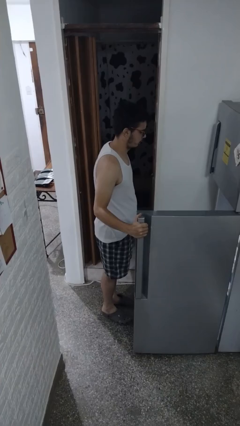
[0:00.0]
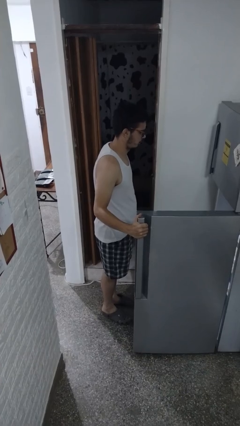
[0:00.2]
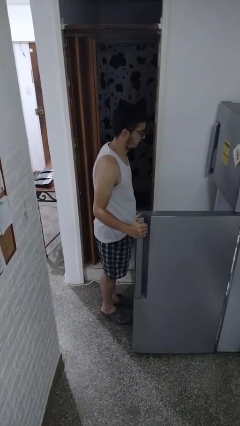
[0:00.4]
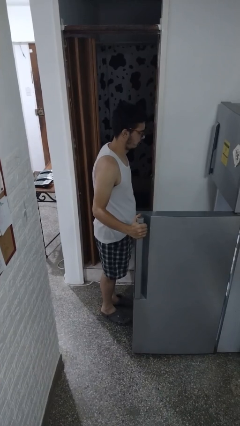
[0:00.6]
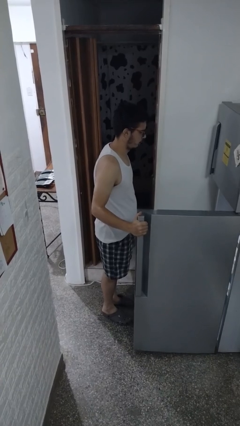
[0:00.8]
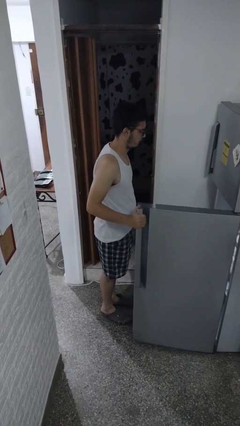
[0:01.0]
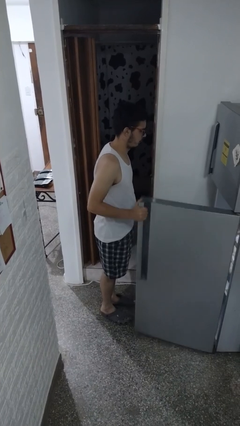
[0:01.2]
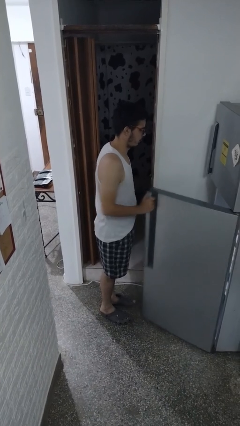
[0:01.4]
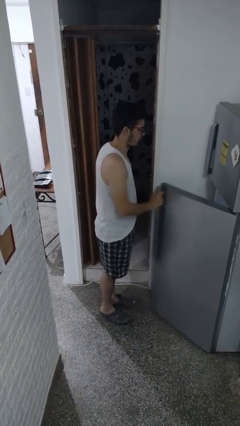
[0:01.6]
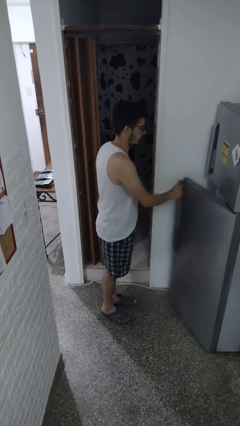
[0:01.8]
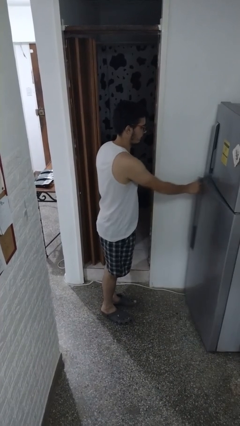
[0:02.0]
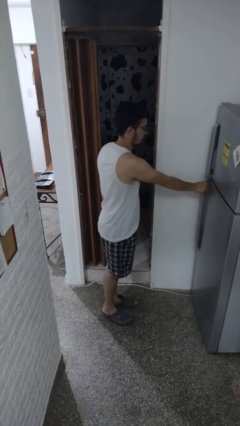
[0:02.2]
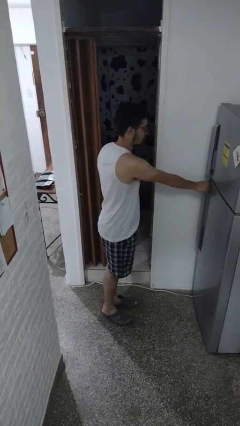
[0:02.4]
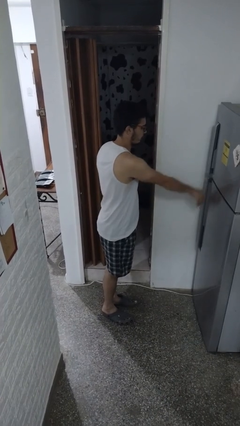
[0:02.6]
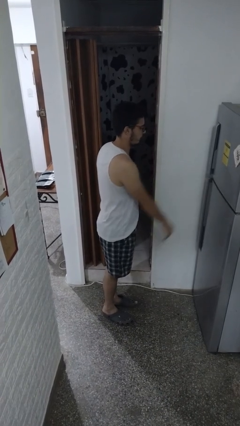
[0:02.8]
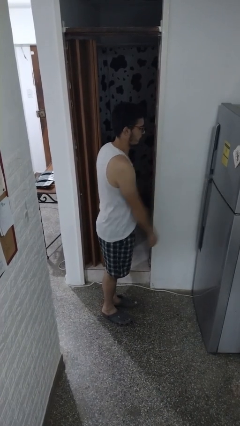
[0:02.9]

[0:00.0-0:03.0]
person closes refrigerator

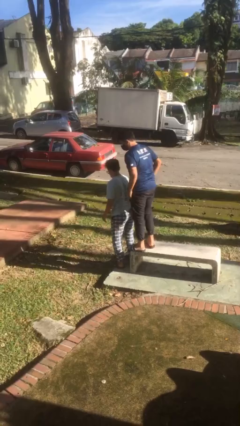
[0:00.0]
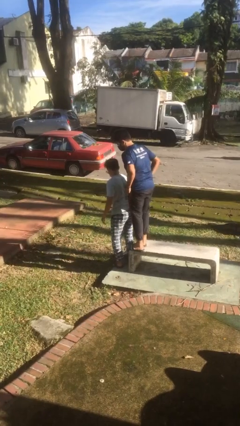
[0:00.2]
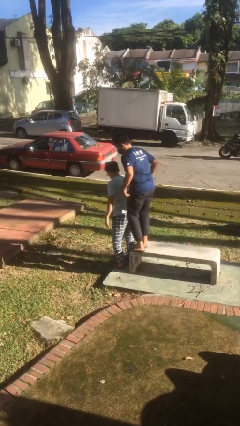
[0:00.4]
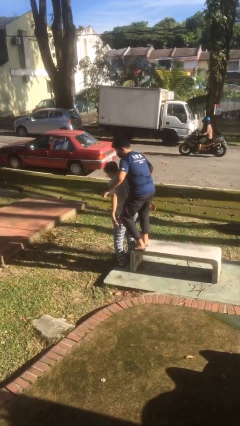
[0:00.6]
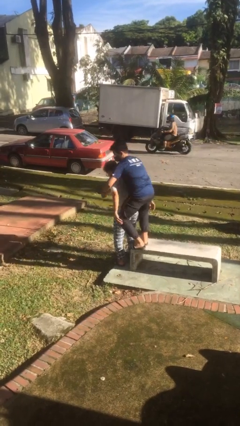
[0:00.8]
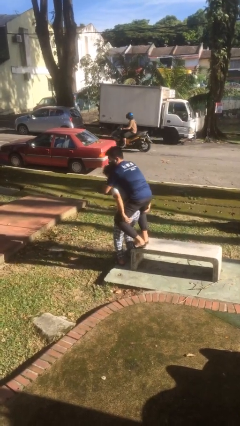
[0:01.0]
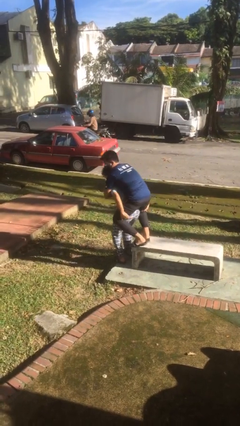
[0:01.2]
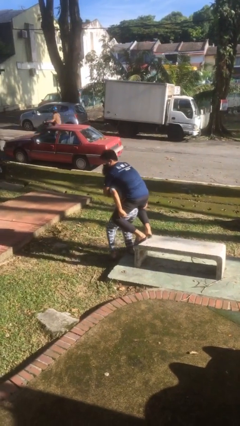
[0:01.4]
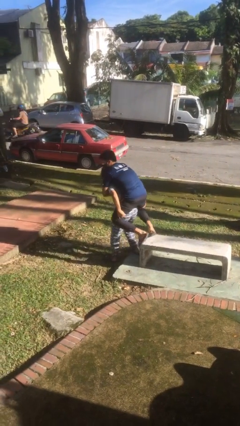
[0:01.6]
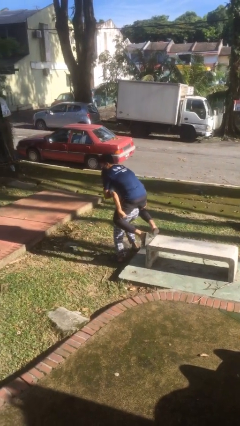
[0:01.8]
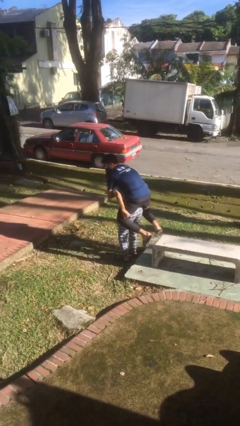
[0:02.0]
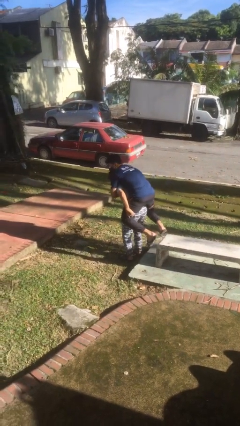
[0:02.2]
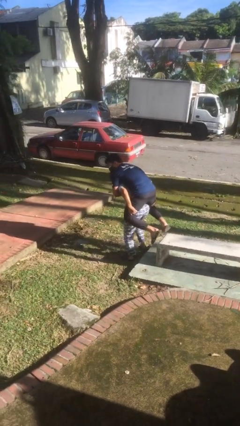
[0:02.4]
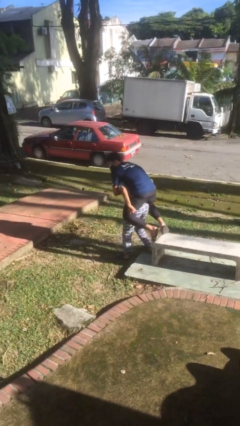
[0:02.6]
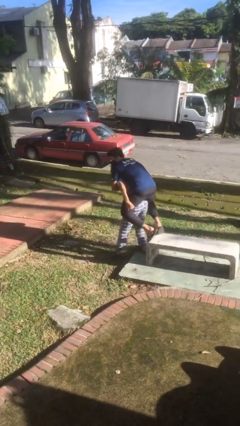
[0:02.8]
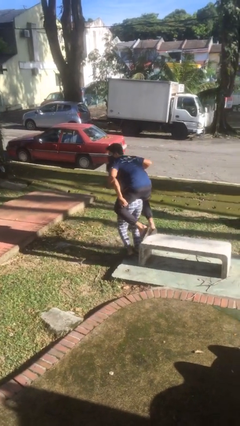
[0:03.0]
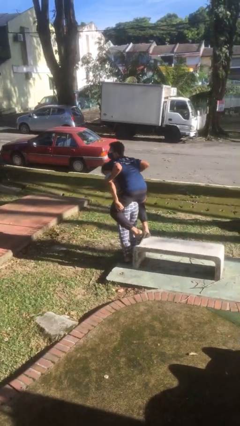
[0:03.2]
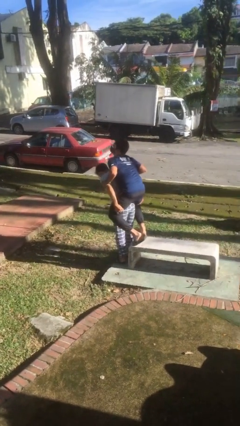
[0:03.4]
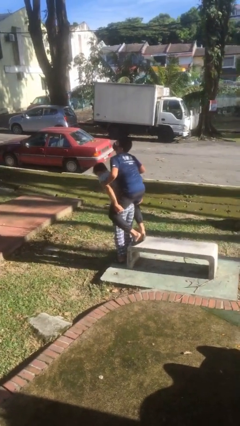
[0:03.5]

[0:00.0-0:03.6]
person carries person on shoulders

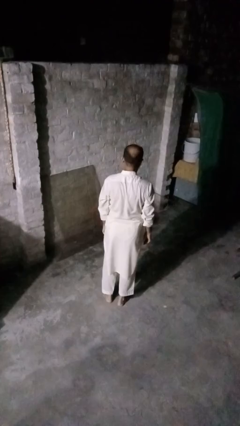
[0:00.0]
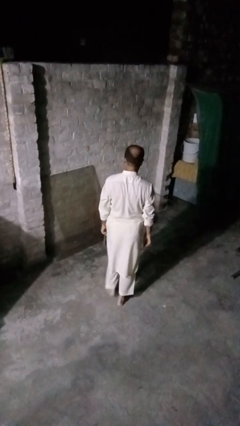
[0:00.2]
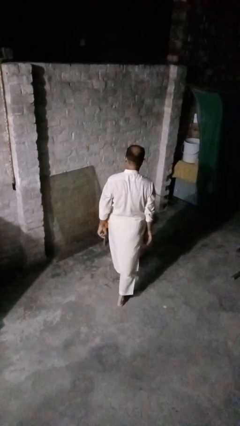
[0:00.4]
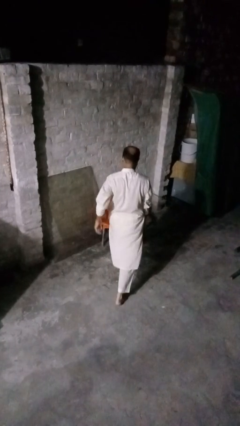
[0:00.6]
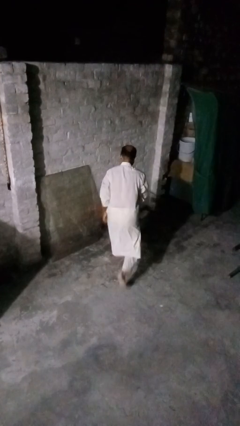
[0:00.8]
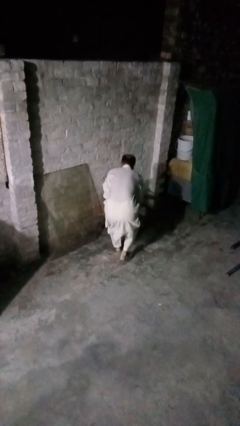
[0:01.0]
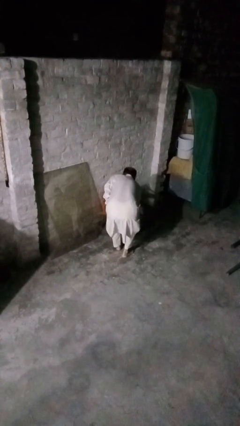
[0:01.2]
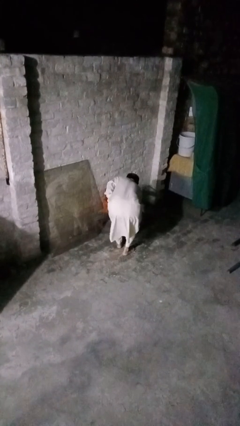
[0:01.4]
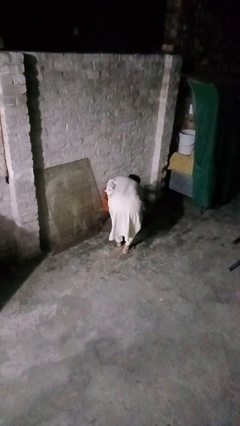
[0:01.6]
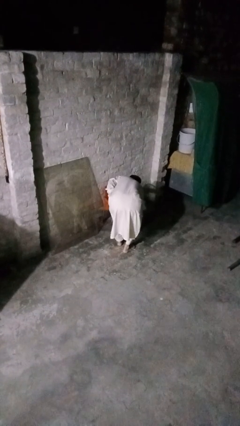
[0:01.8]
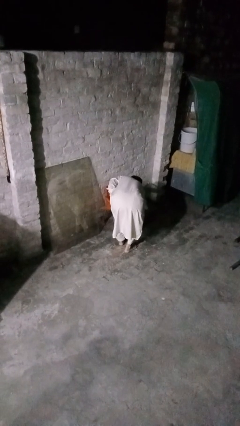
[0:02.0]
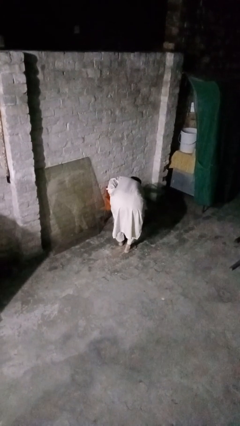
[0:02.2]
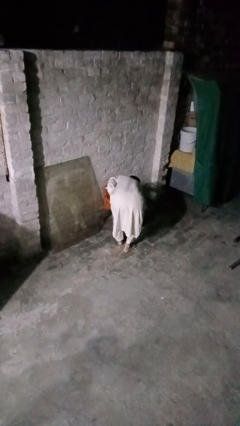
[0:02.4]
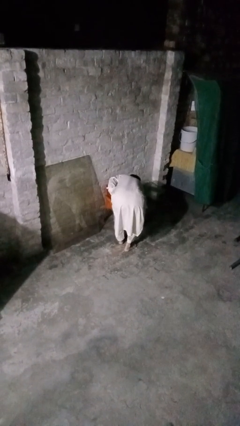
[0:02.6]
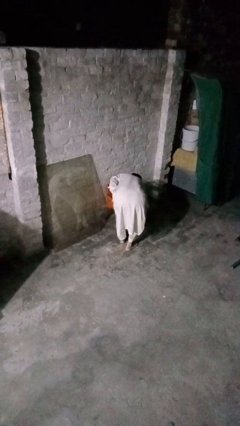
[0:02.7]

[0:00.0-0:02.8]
person stubs toe

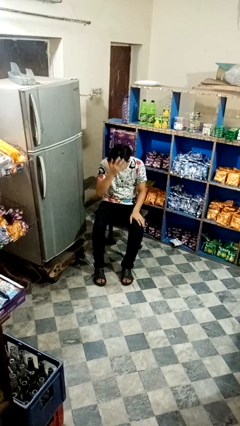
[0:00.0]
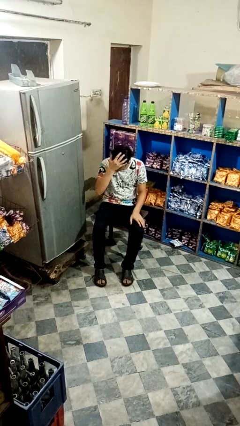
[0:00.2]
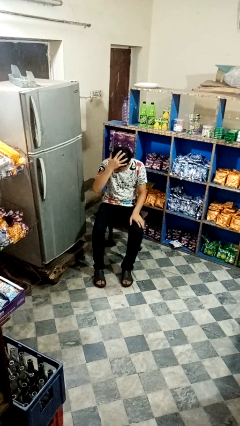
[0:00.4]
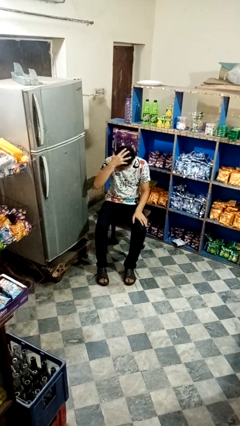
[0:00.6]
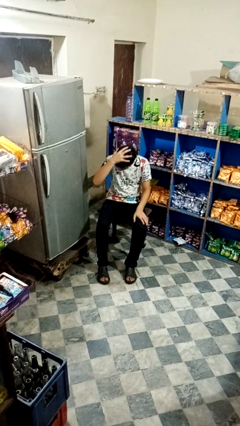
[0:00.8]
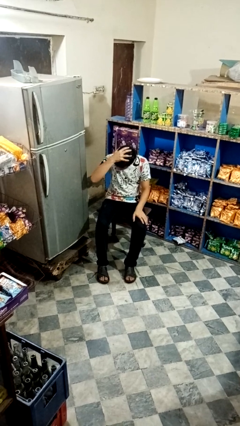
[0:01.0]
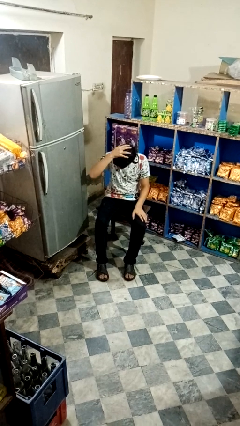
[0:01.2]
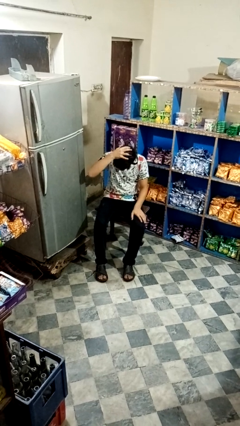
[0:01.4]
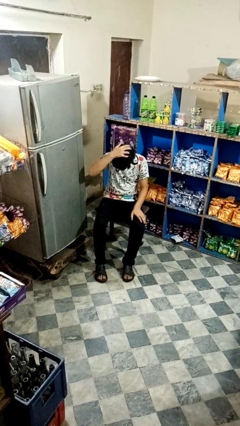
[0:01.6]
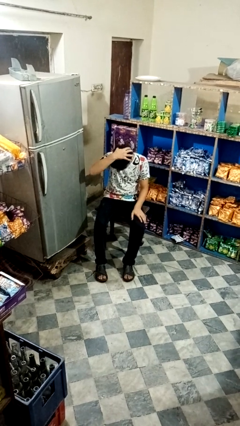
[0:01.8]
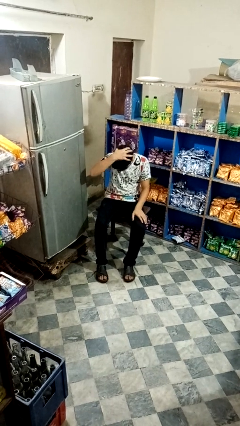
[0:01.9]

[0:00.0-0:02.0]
person pats head

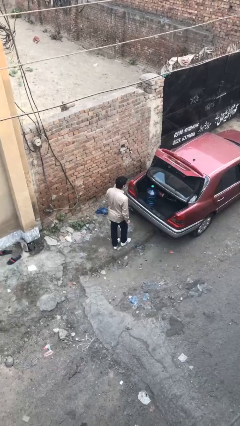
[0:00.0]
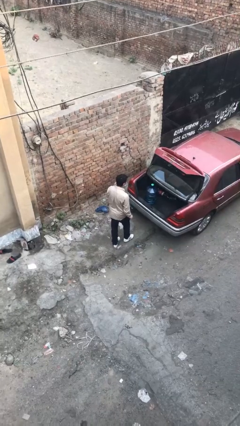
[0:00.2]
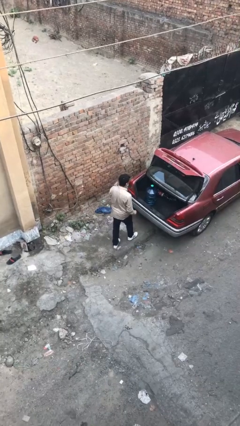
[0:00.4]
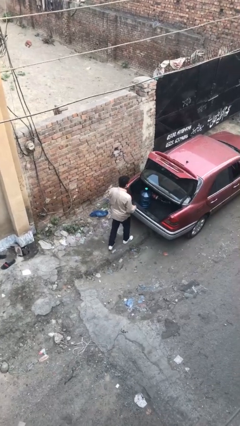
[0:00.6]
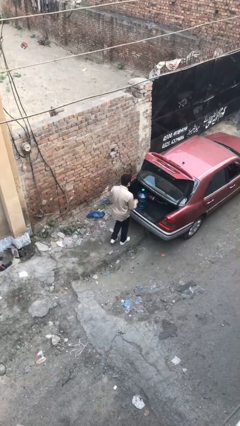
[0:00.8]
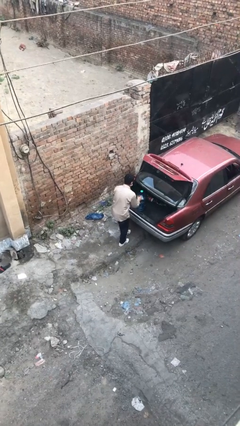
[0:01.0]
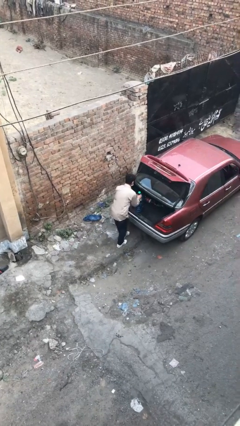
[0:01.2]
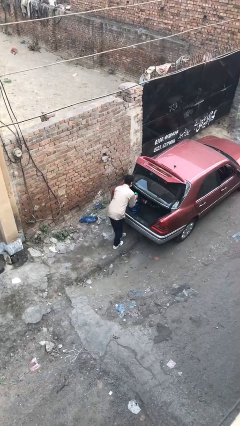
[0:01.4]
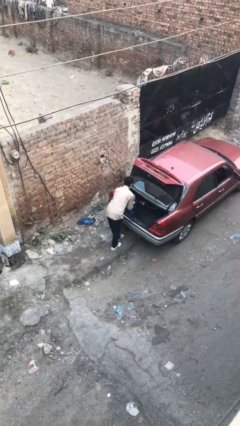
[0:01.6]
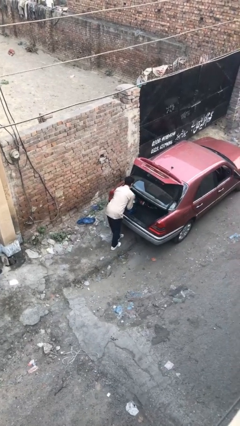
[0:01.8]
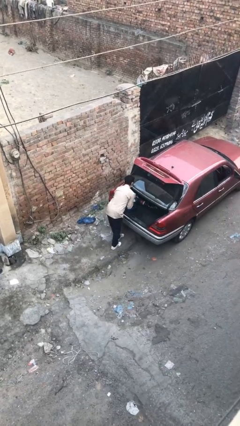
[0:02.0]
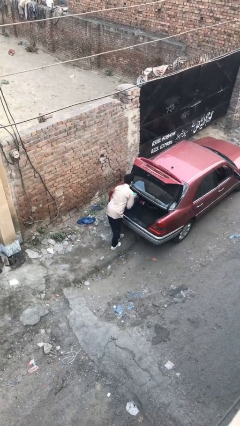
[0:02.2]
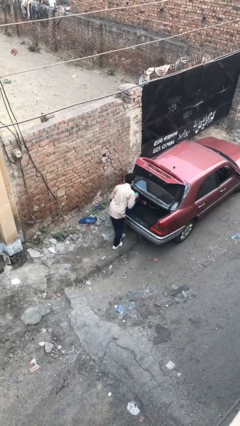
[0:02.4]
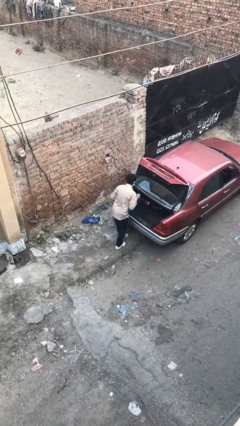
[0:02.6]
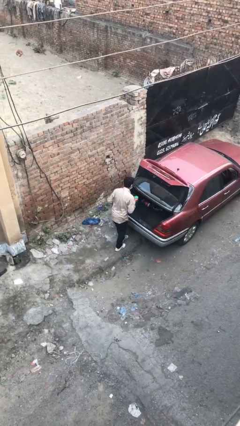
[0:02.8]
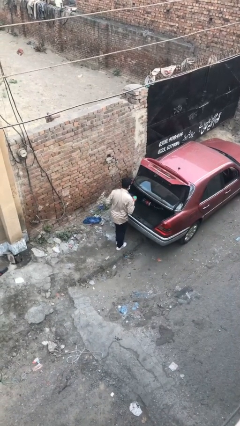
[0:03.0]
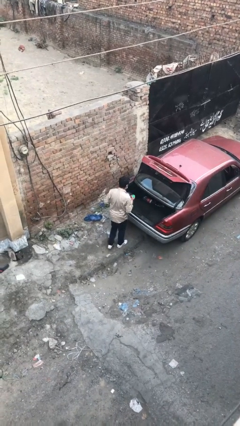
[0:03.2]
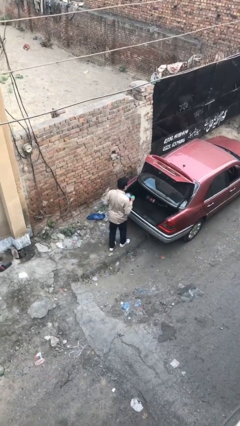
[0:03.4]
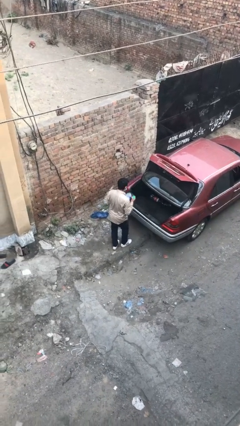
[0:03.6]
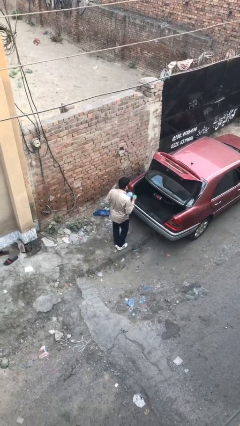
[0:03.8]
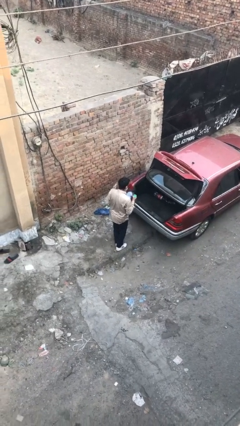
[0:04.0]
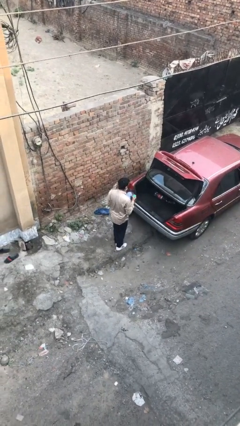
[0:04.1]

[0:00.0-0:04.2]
person unloads car

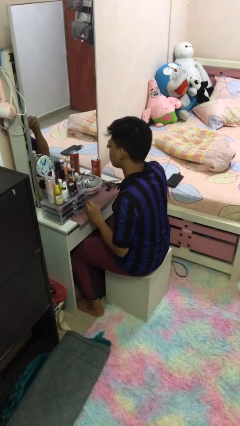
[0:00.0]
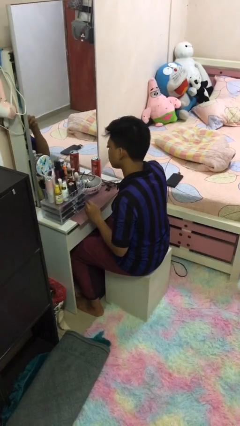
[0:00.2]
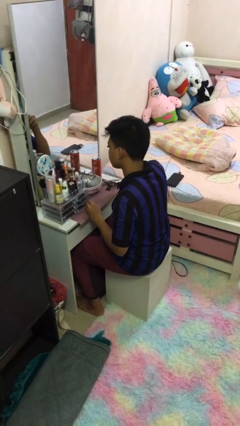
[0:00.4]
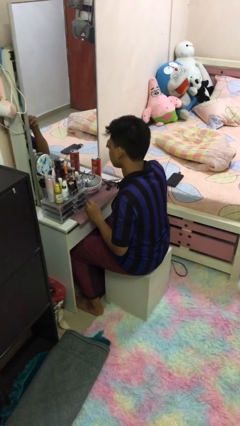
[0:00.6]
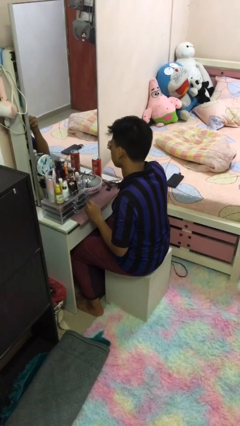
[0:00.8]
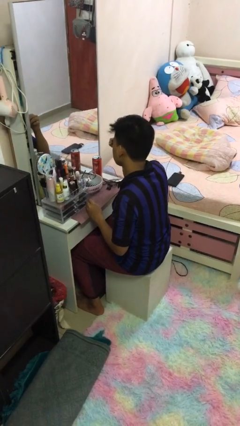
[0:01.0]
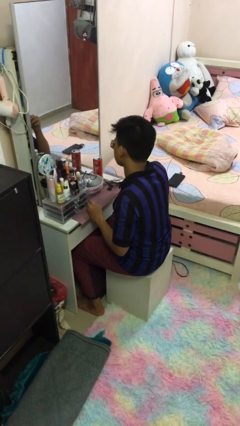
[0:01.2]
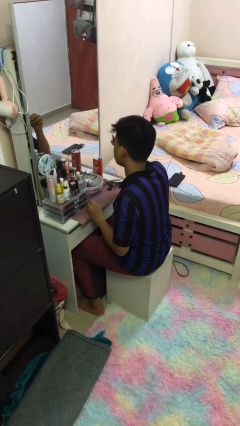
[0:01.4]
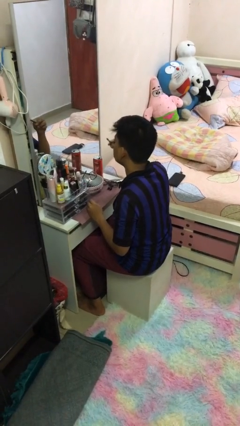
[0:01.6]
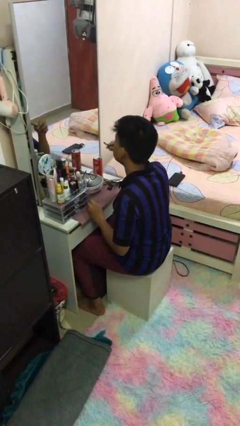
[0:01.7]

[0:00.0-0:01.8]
person applies eye makeup
